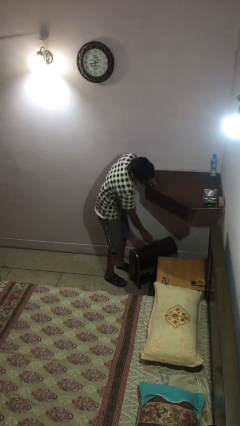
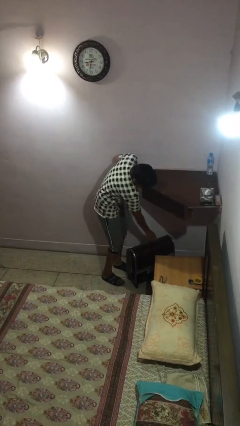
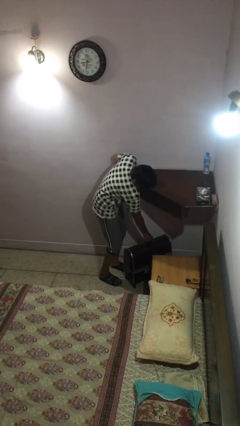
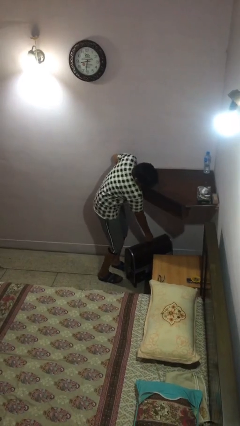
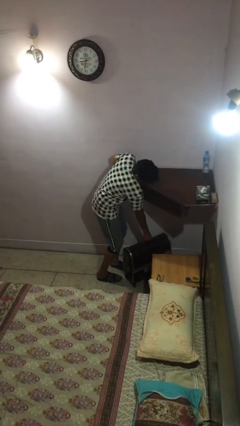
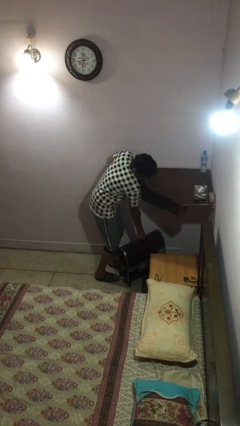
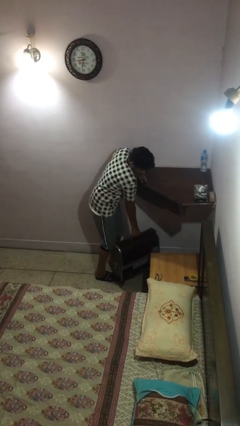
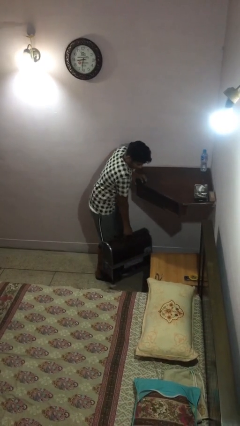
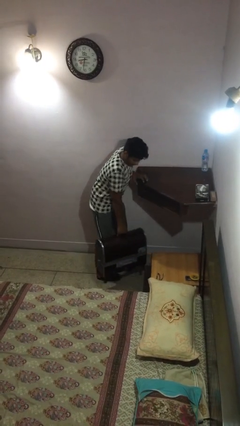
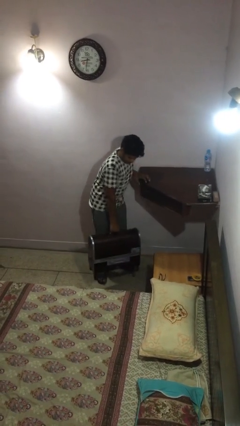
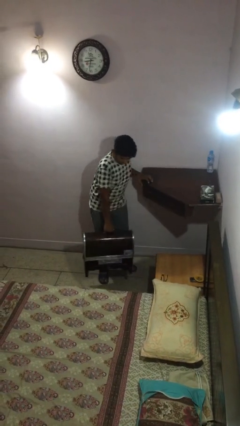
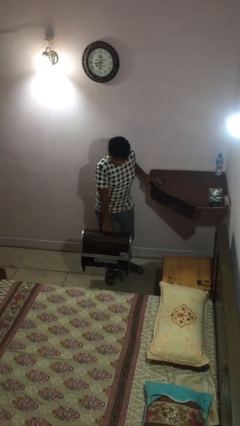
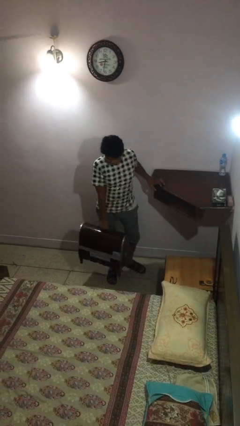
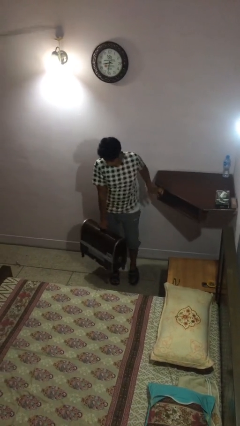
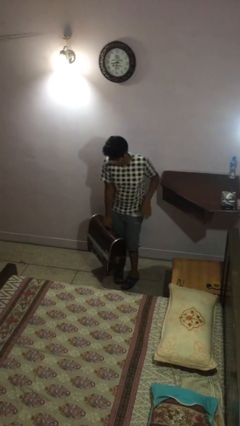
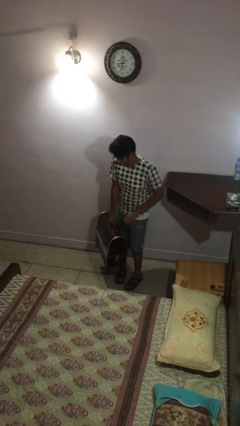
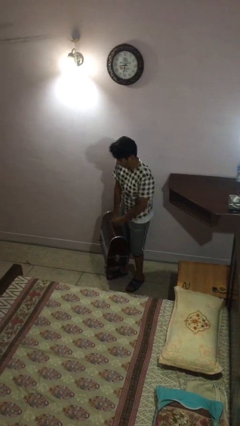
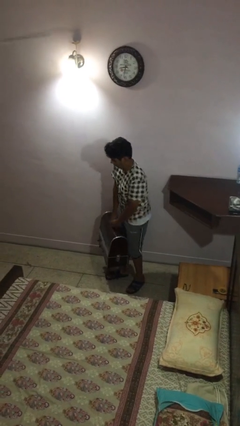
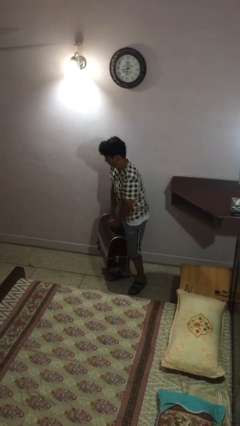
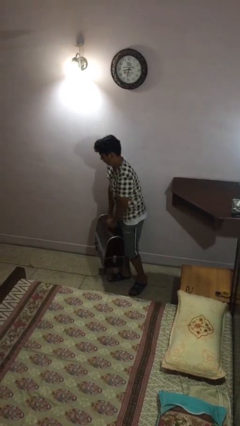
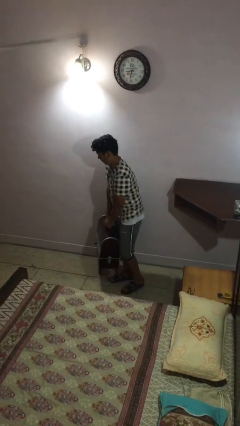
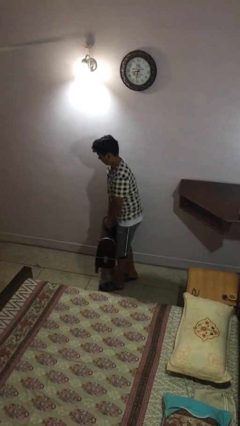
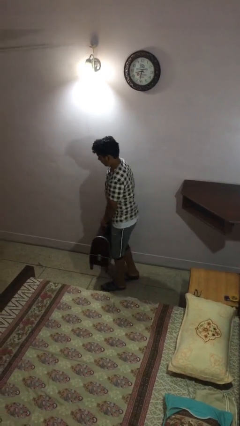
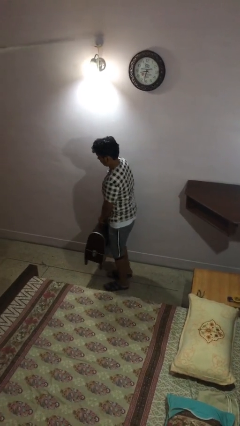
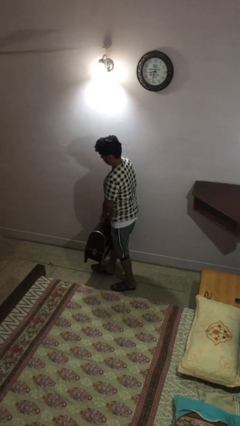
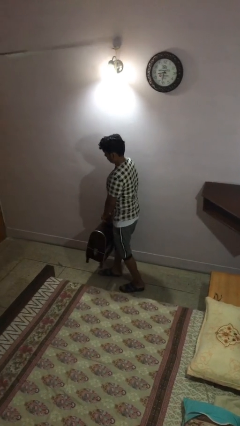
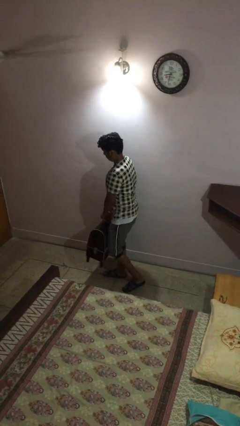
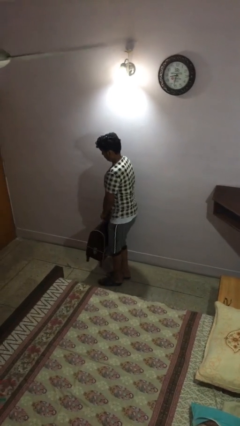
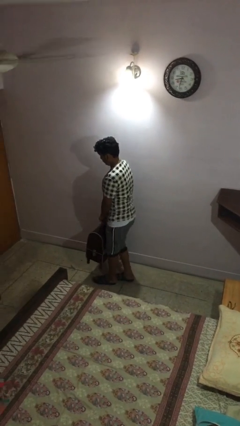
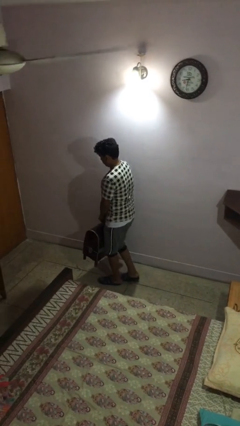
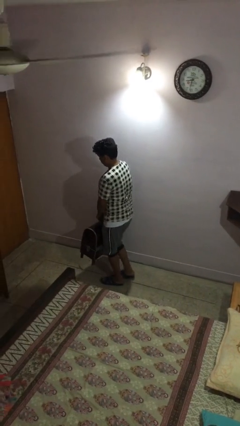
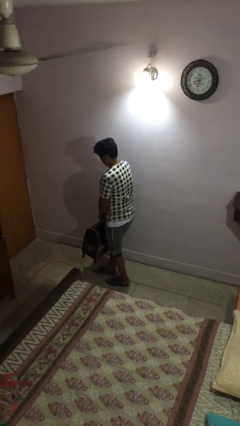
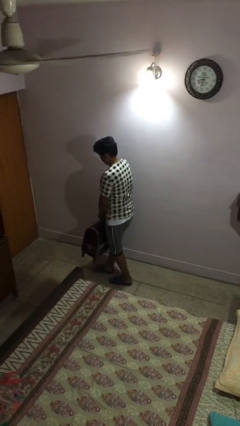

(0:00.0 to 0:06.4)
person carries heavy object

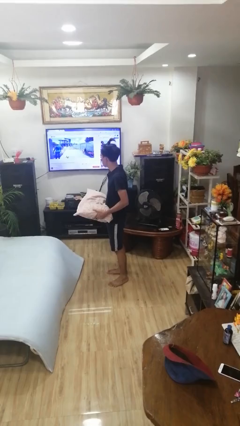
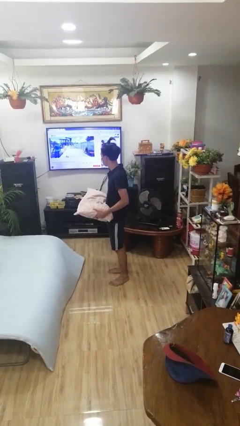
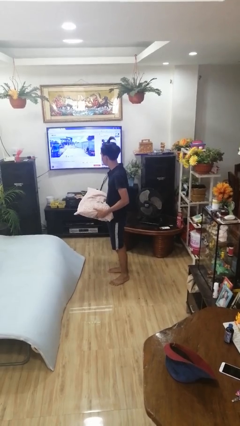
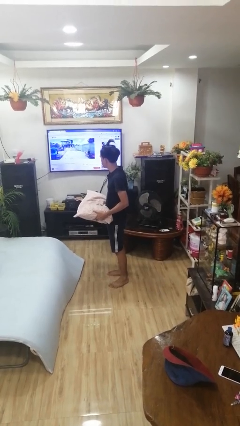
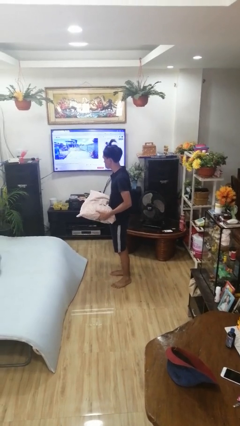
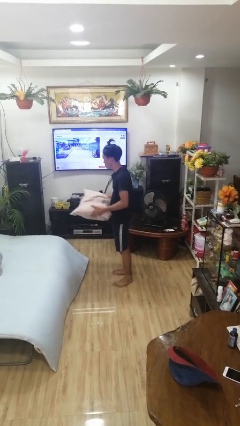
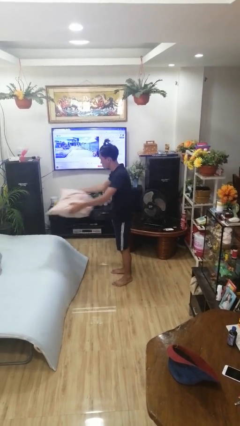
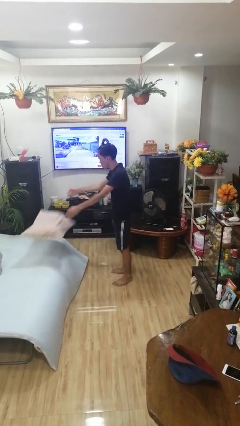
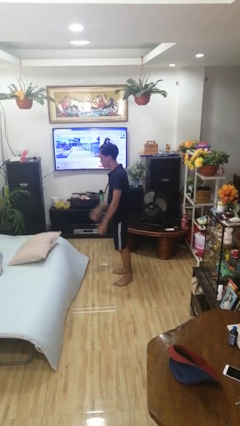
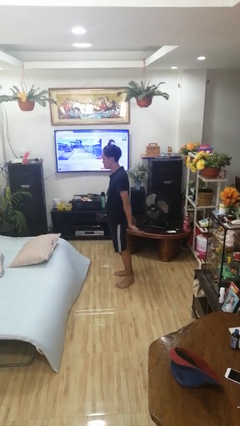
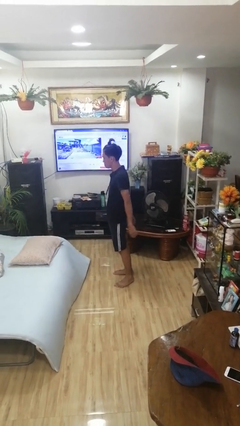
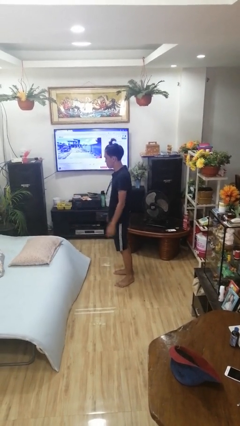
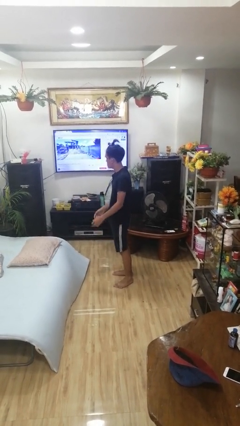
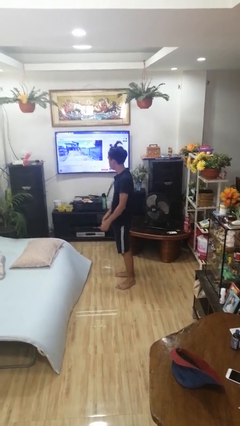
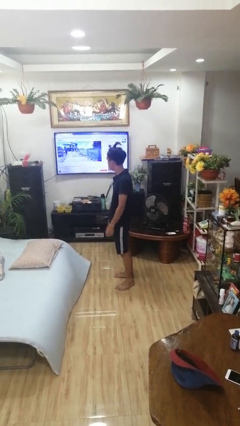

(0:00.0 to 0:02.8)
person throws object on bed

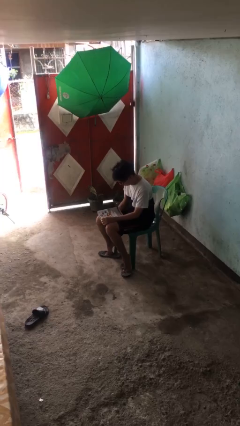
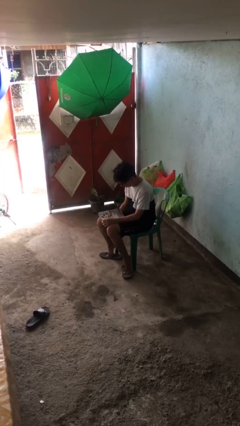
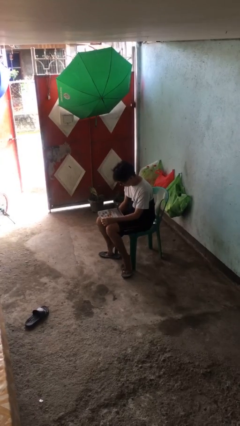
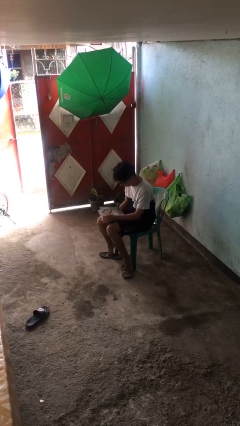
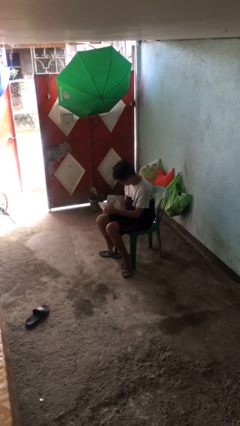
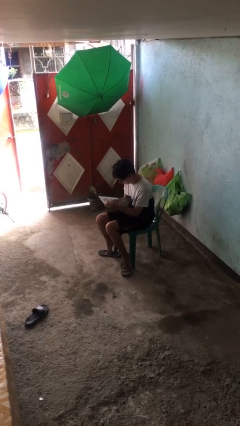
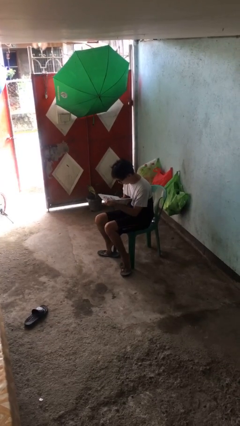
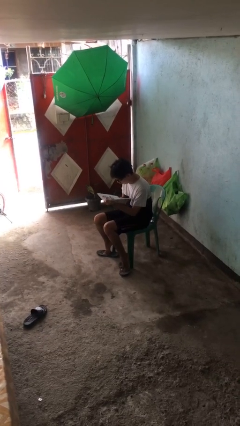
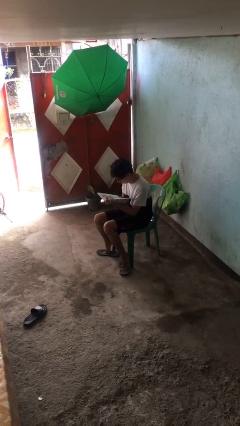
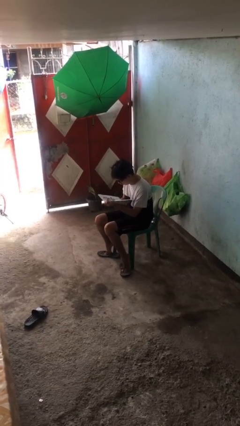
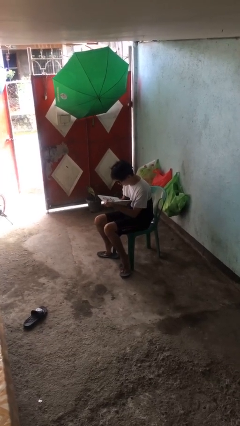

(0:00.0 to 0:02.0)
person reads document

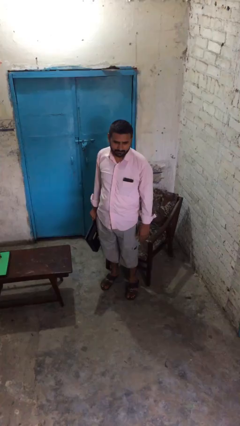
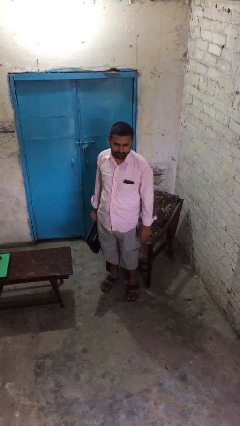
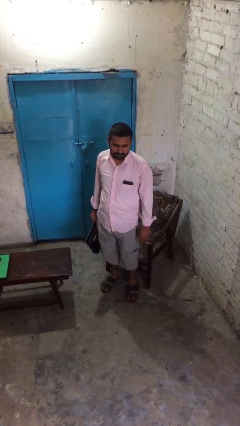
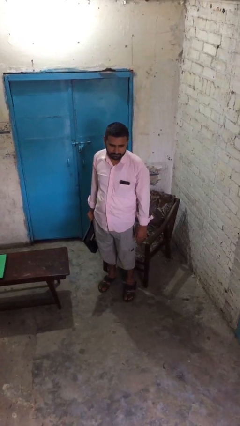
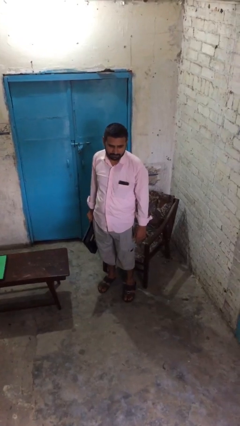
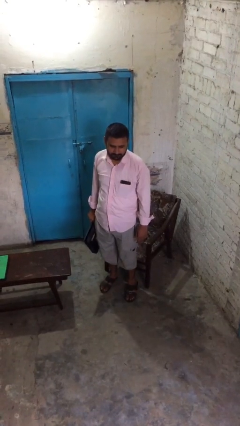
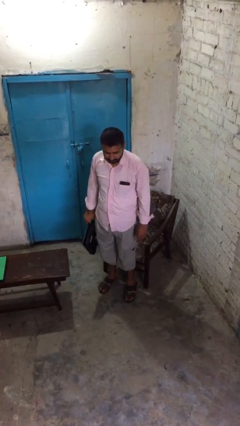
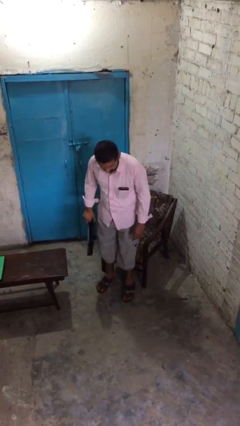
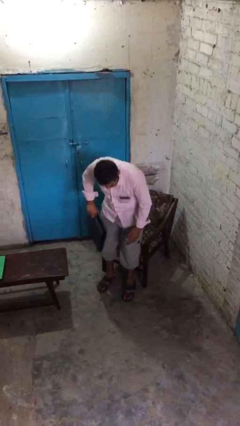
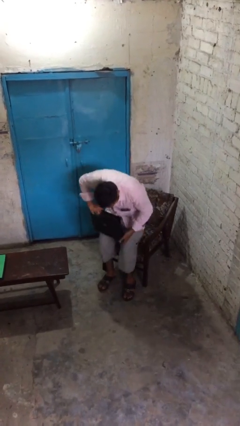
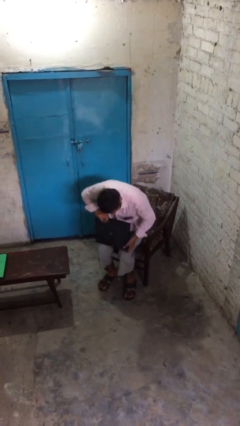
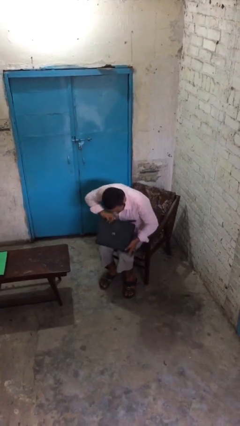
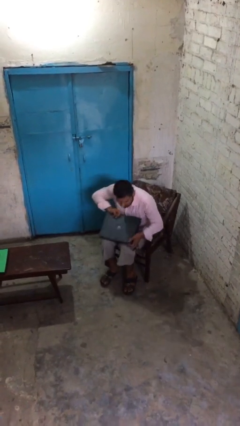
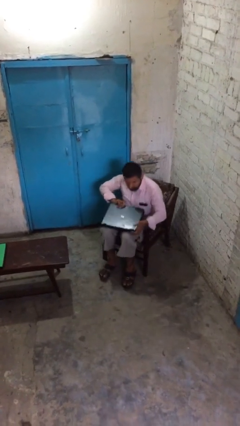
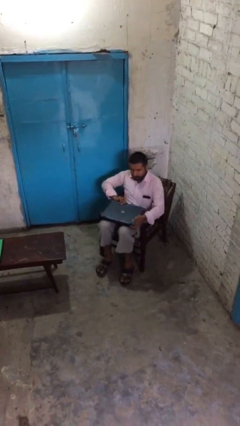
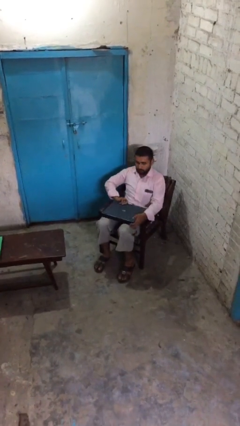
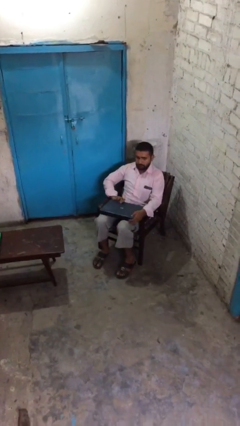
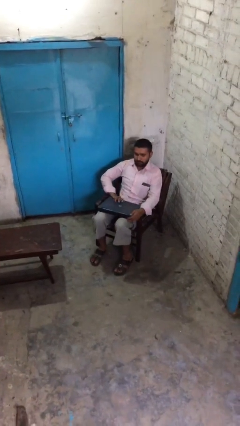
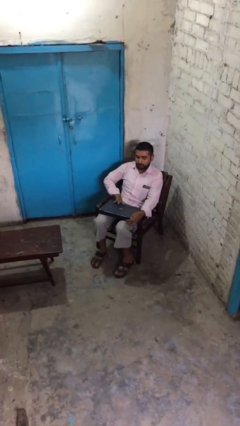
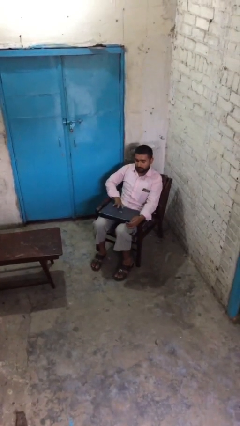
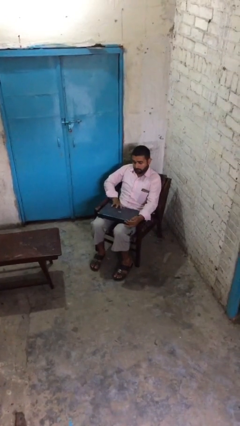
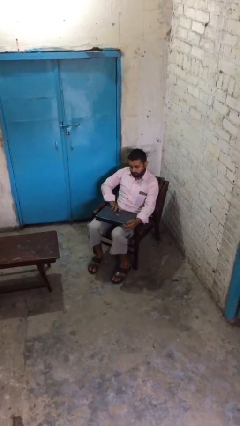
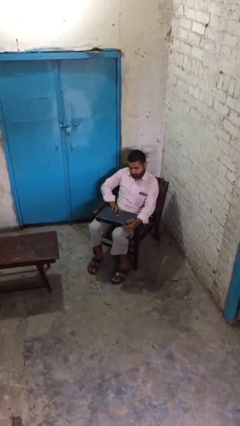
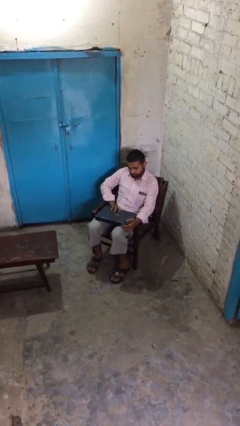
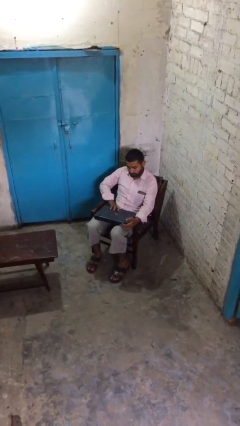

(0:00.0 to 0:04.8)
person sits down

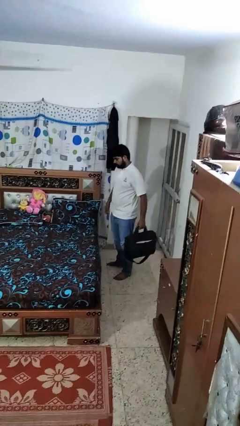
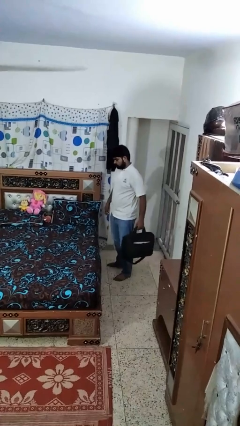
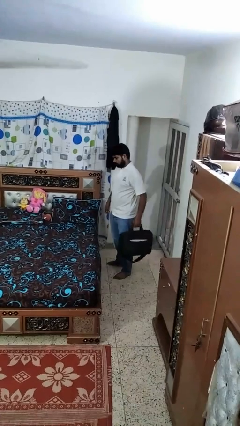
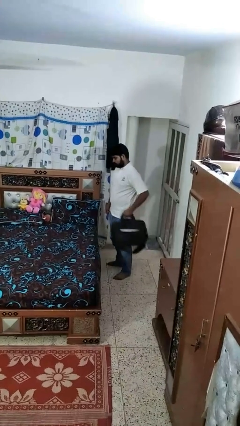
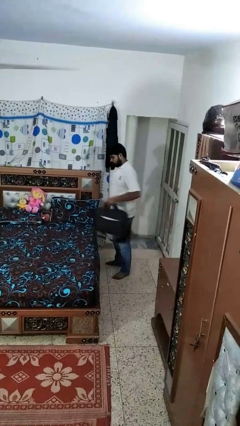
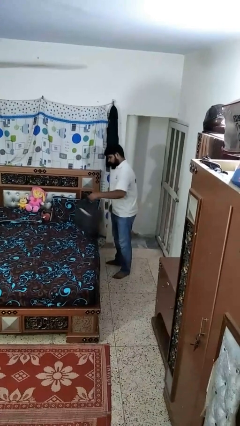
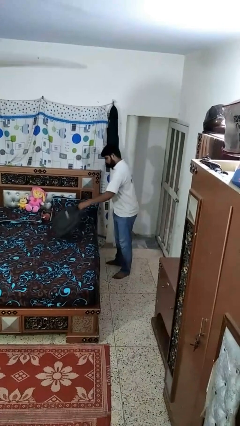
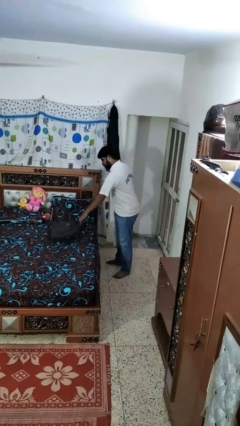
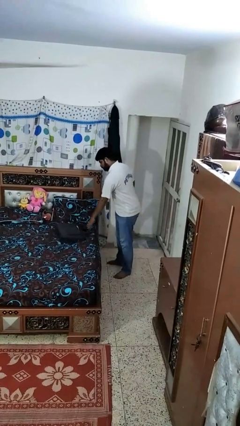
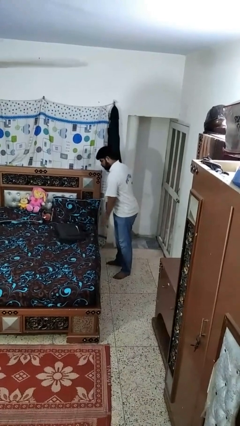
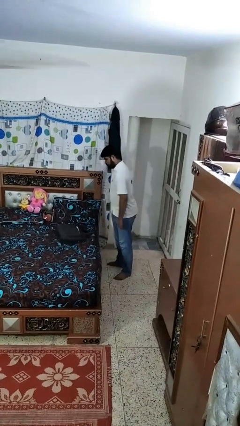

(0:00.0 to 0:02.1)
person puts down object on bed
